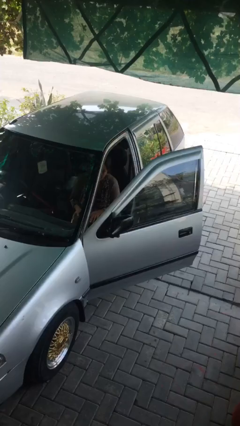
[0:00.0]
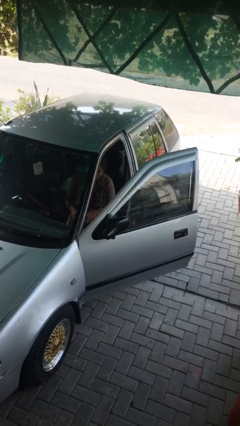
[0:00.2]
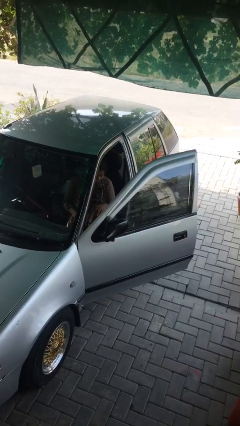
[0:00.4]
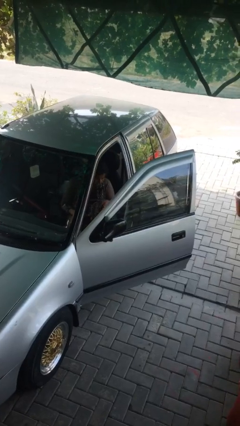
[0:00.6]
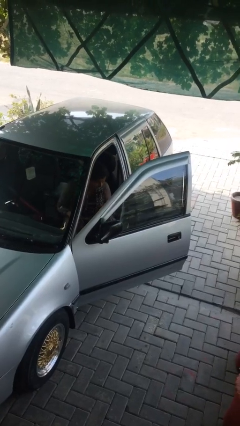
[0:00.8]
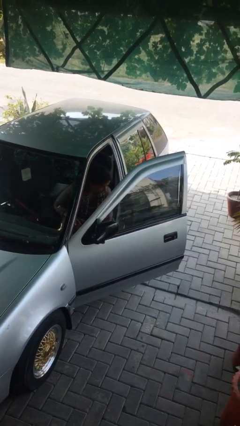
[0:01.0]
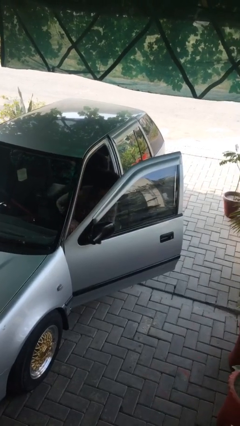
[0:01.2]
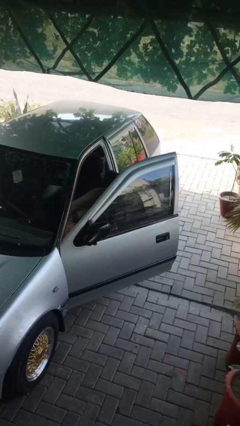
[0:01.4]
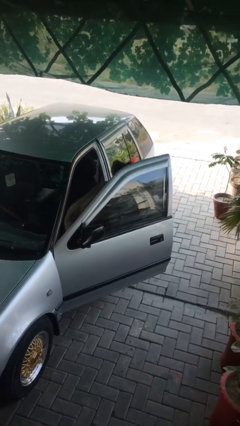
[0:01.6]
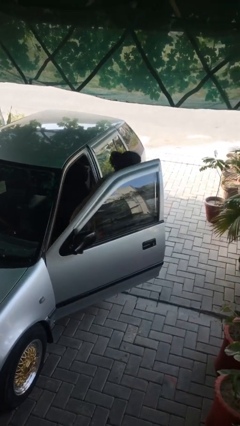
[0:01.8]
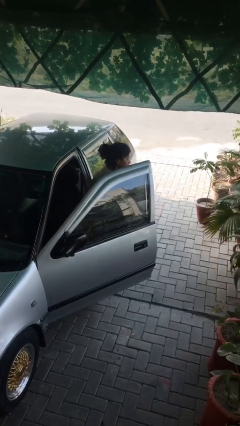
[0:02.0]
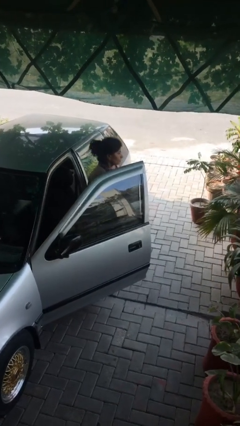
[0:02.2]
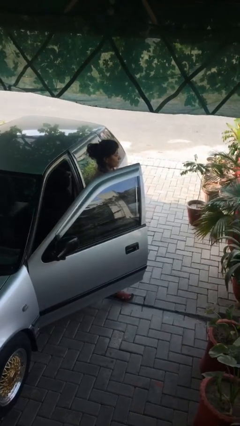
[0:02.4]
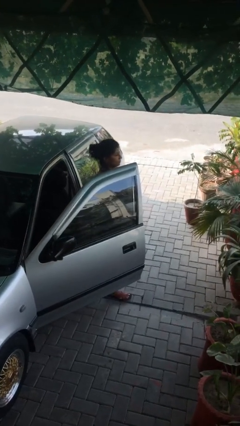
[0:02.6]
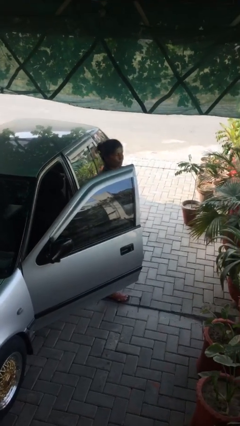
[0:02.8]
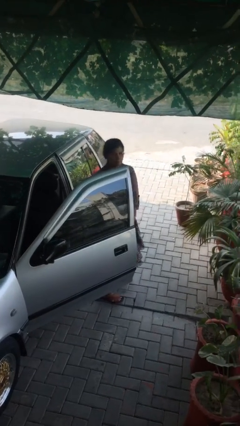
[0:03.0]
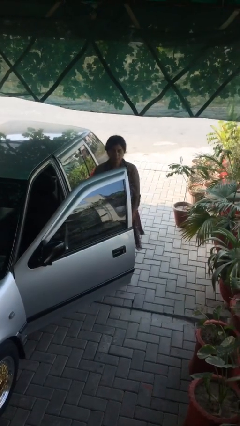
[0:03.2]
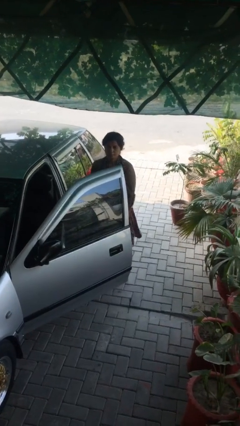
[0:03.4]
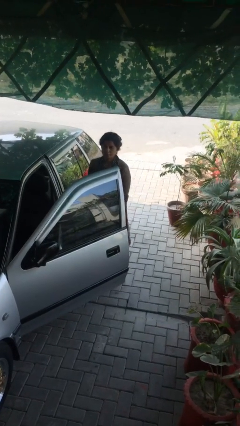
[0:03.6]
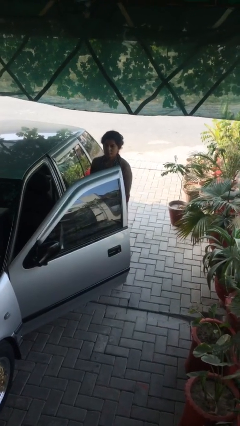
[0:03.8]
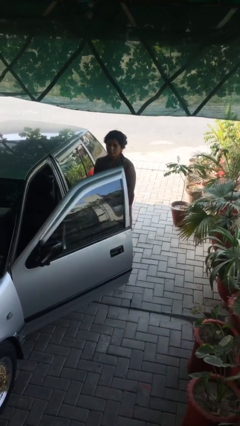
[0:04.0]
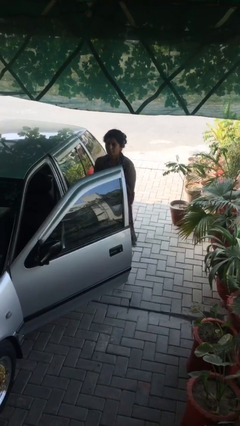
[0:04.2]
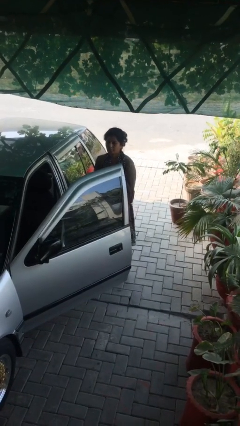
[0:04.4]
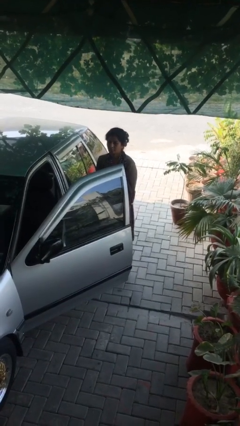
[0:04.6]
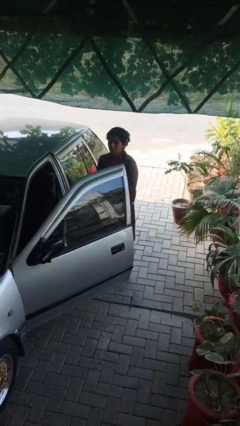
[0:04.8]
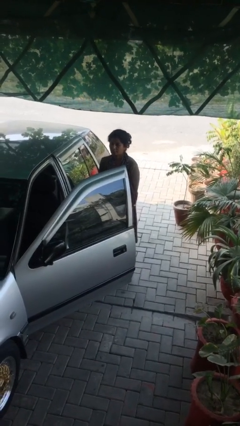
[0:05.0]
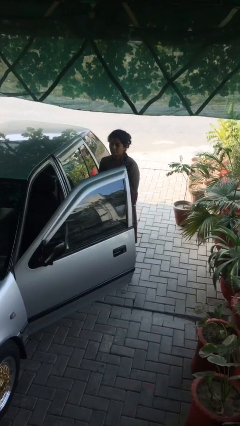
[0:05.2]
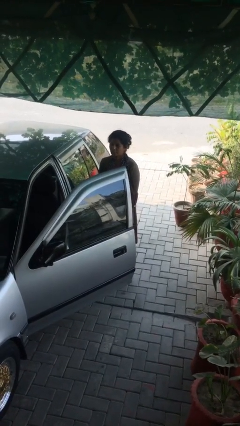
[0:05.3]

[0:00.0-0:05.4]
person exits car

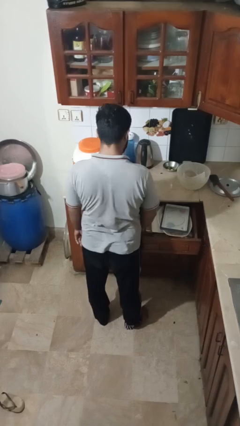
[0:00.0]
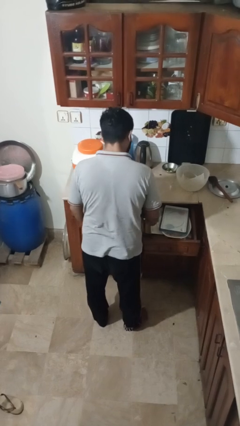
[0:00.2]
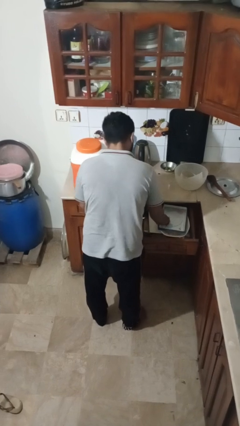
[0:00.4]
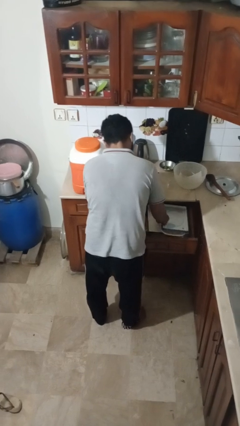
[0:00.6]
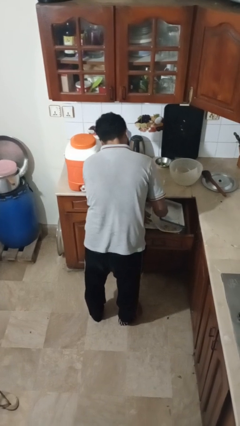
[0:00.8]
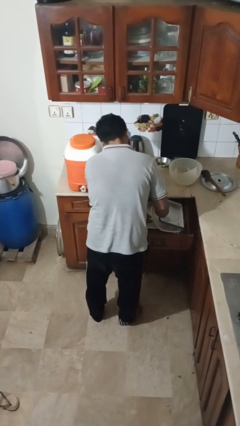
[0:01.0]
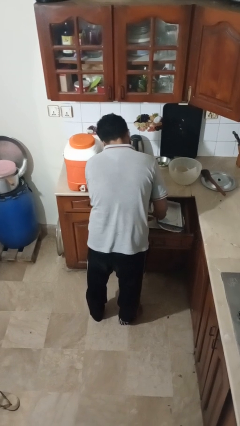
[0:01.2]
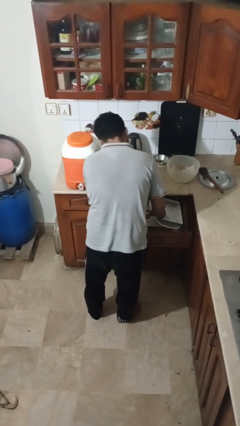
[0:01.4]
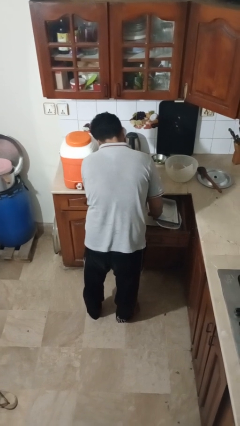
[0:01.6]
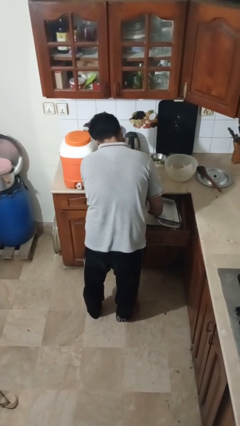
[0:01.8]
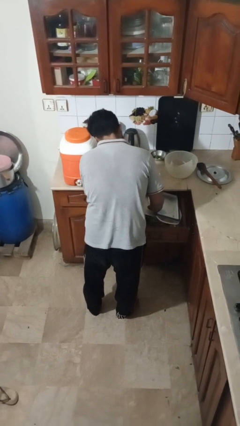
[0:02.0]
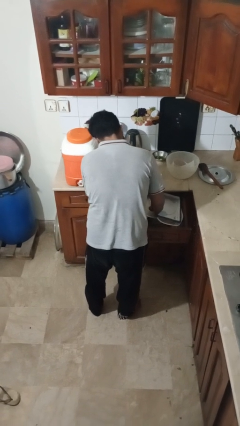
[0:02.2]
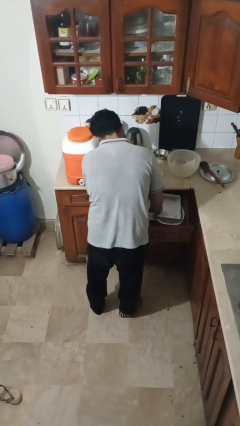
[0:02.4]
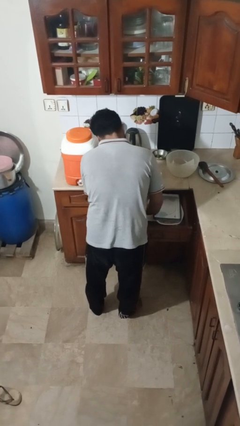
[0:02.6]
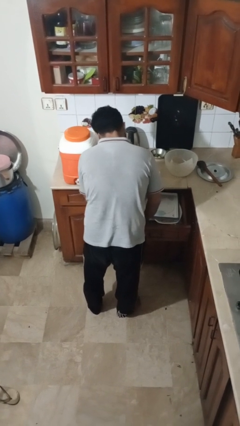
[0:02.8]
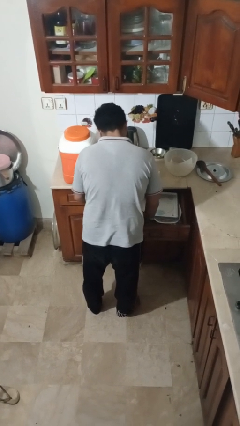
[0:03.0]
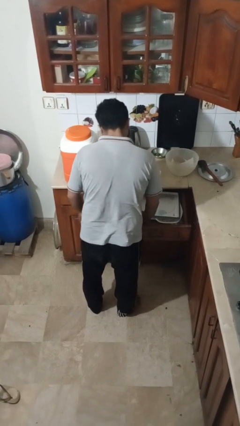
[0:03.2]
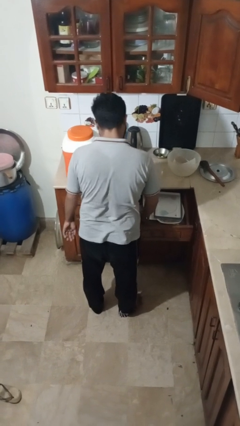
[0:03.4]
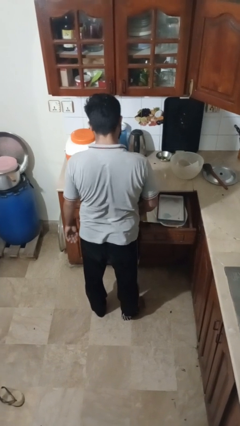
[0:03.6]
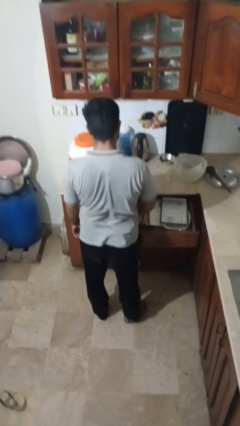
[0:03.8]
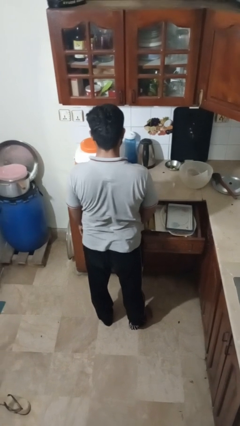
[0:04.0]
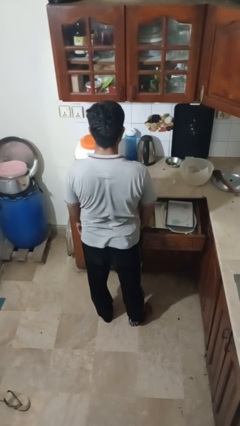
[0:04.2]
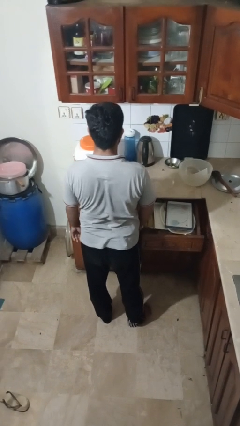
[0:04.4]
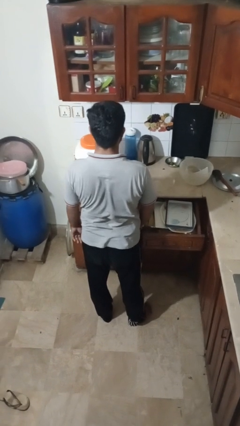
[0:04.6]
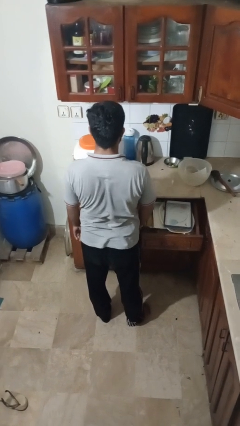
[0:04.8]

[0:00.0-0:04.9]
person searches in kitchen drawer

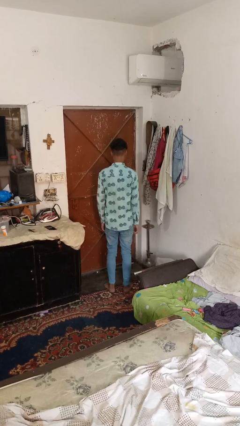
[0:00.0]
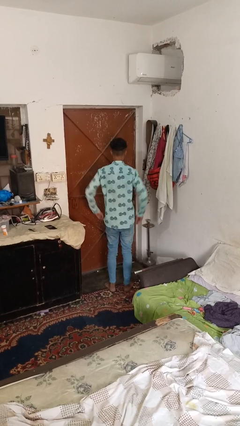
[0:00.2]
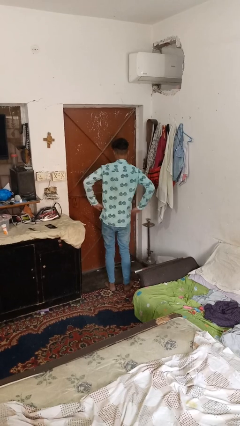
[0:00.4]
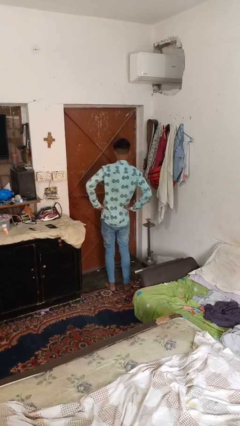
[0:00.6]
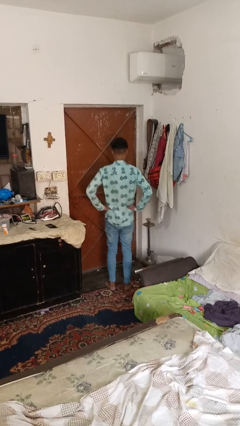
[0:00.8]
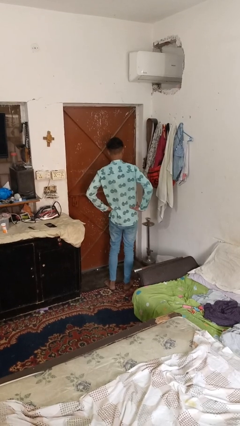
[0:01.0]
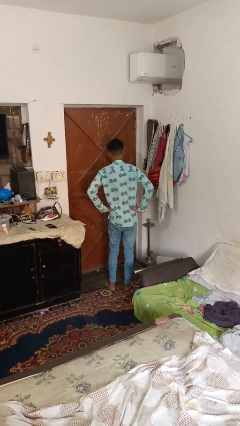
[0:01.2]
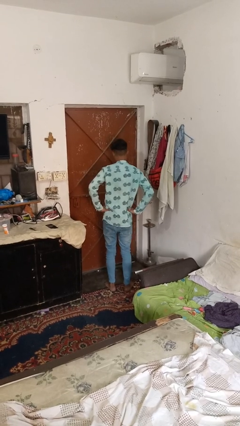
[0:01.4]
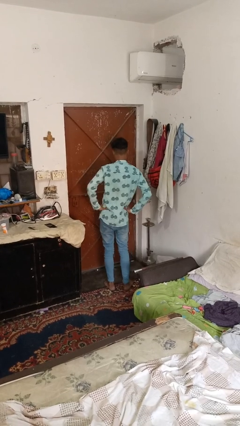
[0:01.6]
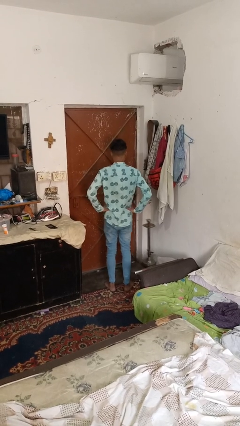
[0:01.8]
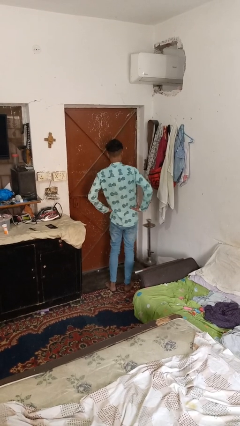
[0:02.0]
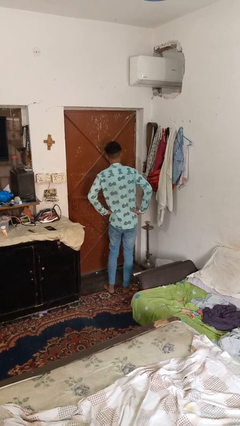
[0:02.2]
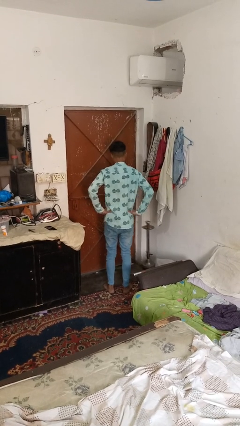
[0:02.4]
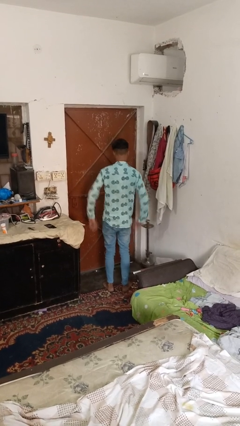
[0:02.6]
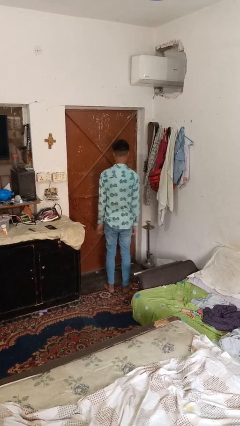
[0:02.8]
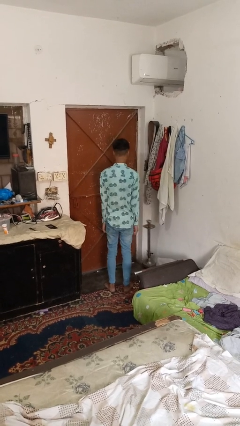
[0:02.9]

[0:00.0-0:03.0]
person wiggles hips

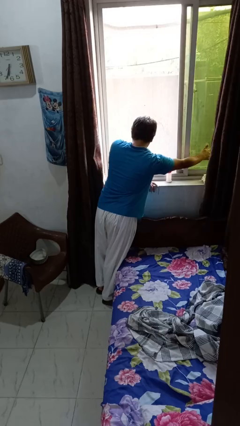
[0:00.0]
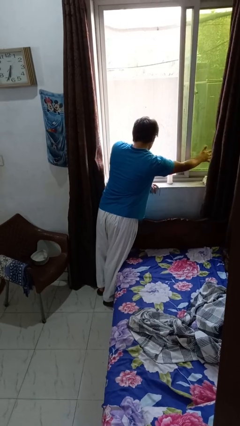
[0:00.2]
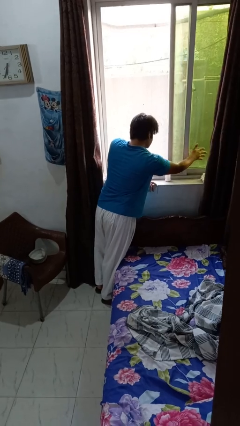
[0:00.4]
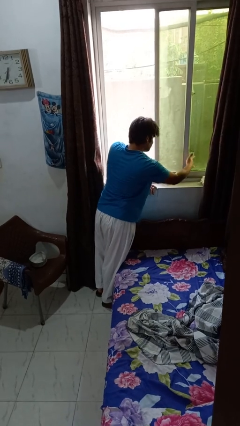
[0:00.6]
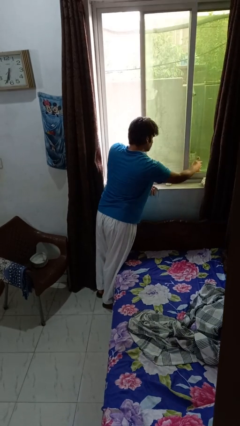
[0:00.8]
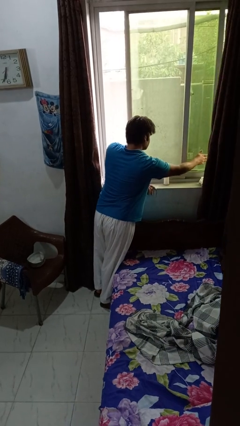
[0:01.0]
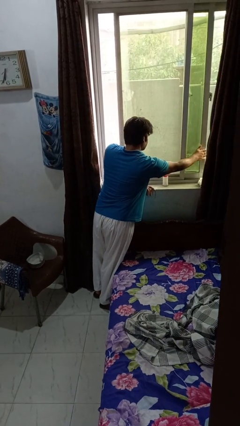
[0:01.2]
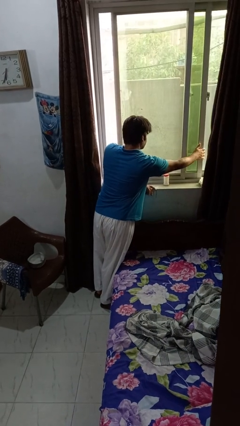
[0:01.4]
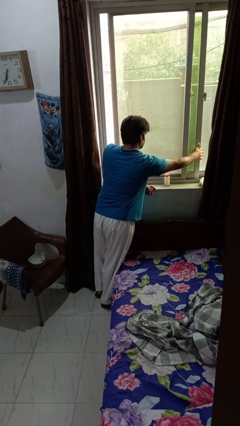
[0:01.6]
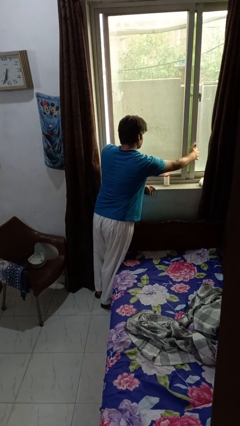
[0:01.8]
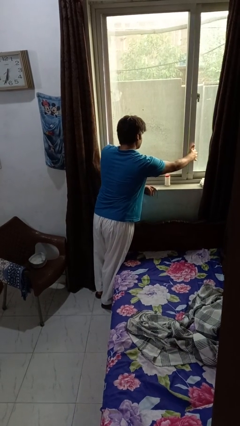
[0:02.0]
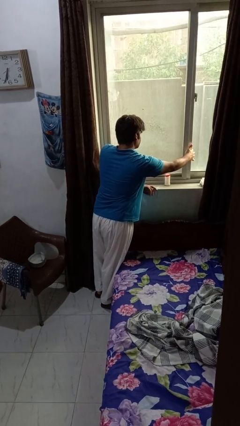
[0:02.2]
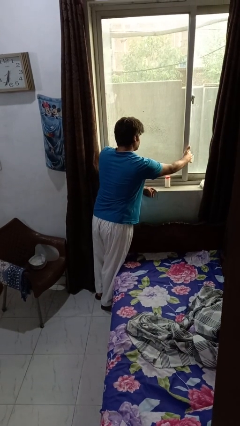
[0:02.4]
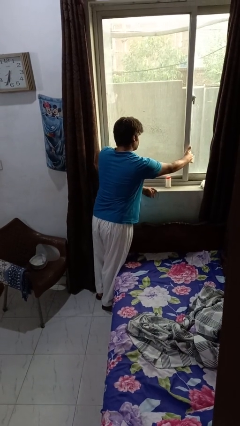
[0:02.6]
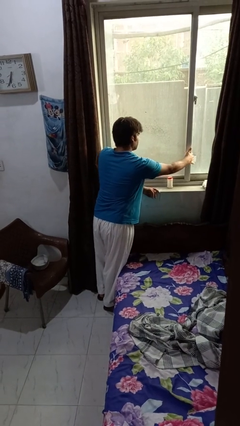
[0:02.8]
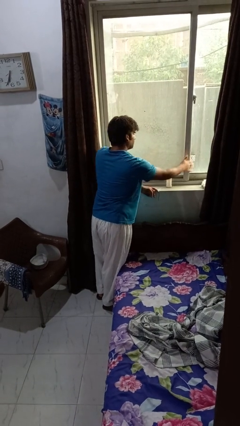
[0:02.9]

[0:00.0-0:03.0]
person closes home window

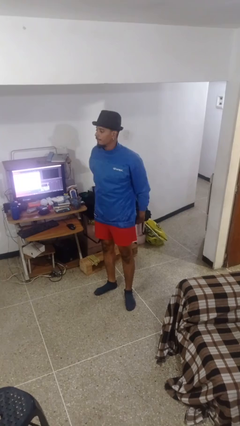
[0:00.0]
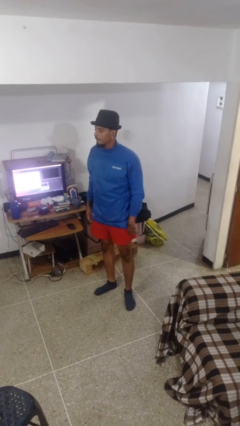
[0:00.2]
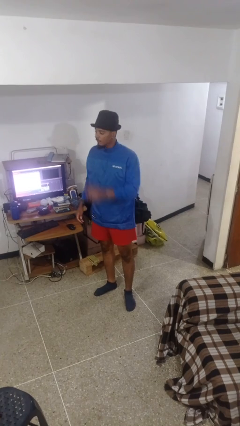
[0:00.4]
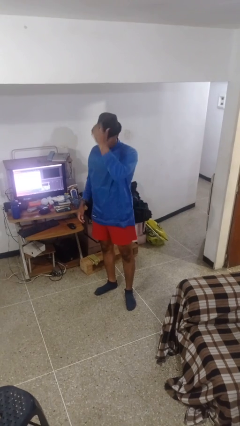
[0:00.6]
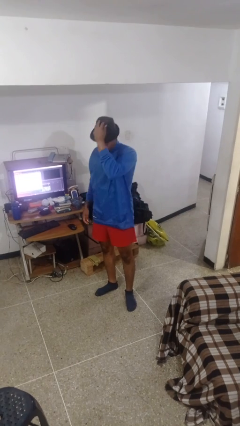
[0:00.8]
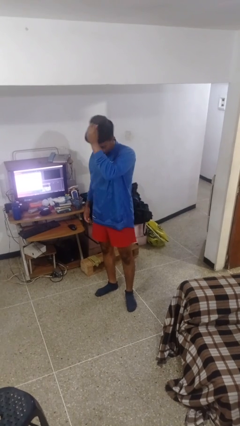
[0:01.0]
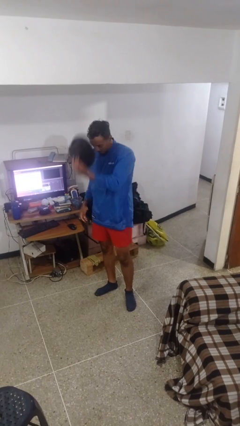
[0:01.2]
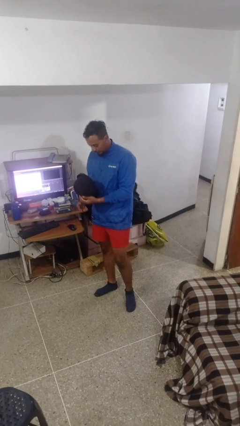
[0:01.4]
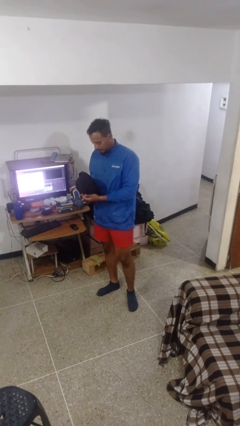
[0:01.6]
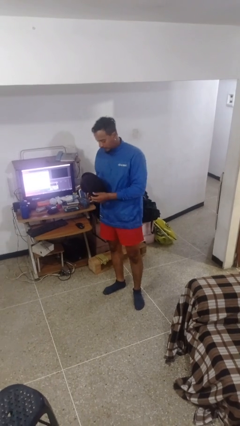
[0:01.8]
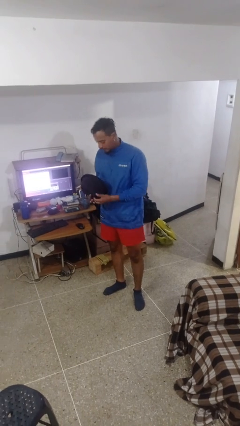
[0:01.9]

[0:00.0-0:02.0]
person takes off hat
